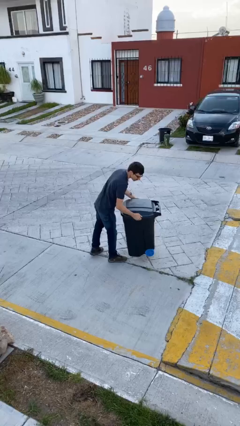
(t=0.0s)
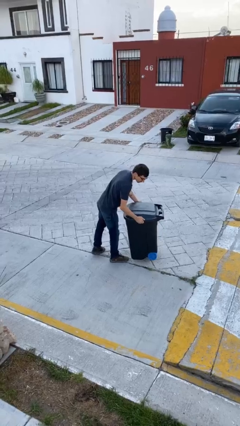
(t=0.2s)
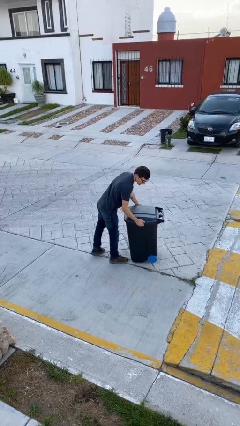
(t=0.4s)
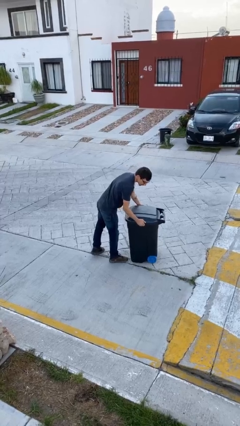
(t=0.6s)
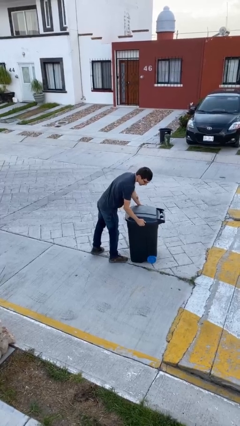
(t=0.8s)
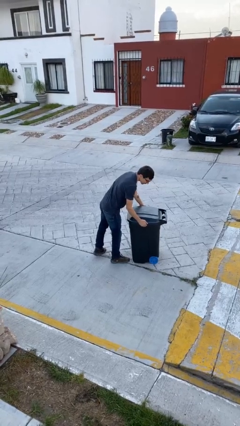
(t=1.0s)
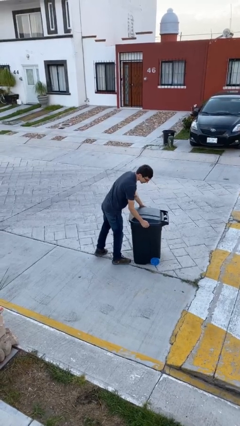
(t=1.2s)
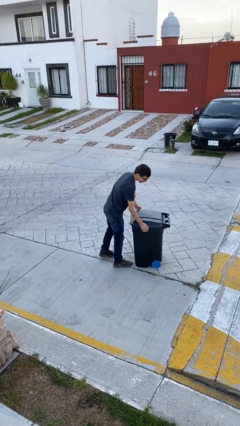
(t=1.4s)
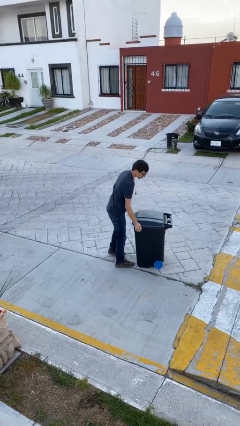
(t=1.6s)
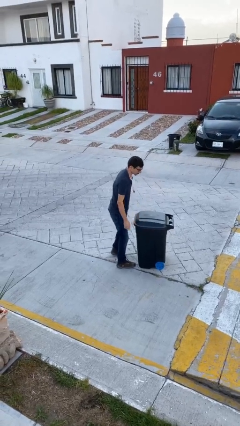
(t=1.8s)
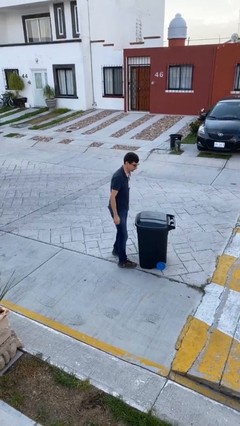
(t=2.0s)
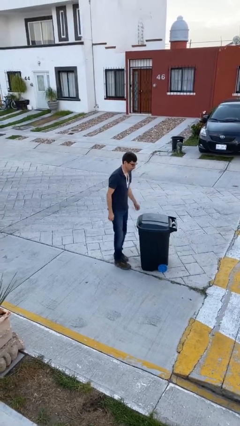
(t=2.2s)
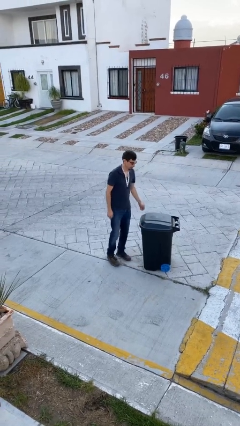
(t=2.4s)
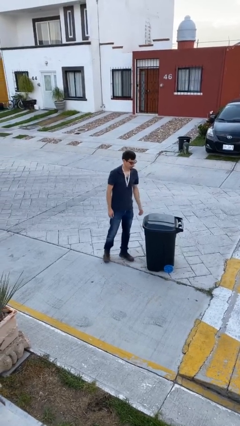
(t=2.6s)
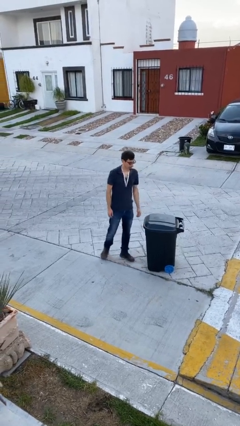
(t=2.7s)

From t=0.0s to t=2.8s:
person puts down object on floor

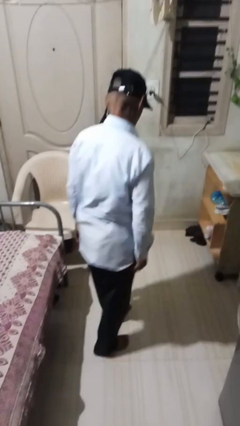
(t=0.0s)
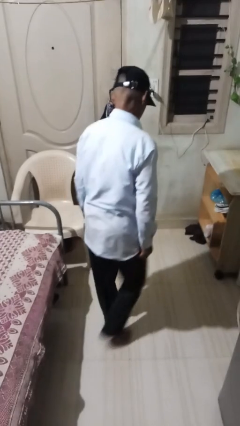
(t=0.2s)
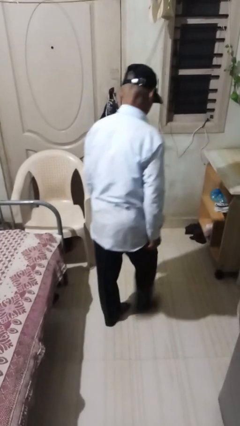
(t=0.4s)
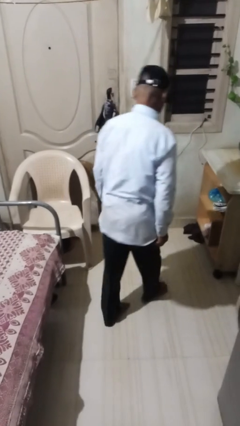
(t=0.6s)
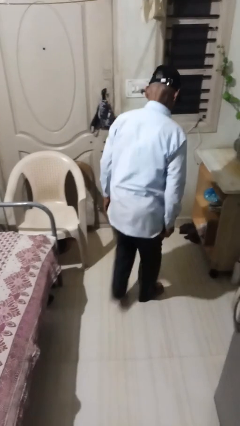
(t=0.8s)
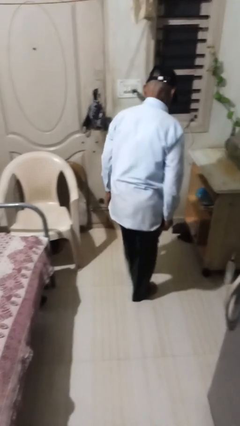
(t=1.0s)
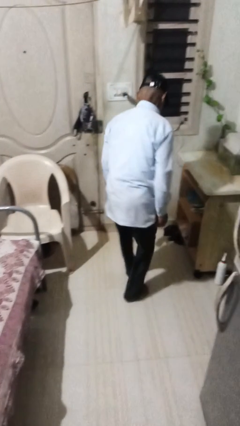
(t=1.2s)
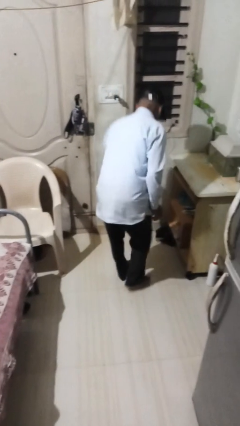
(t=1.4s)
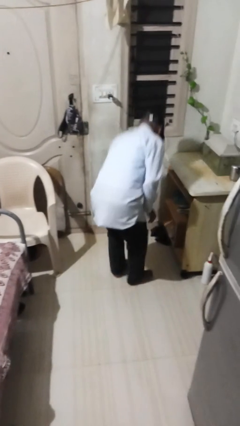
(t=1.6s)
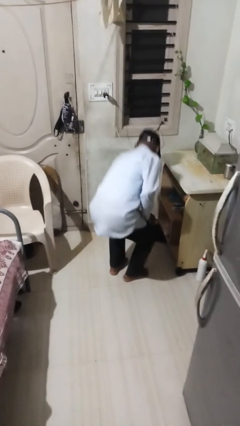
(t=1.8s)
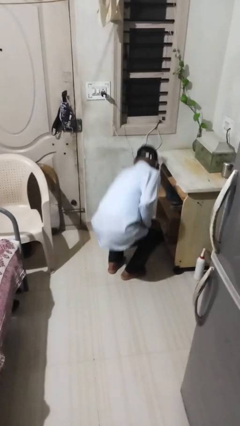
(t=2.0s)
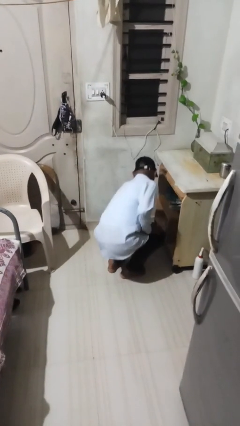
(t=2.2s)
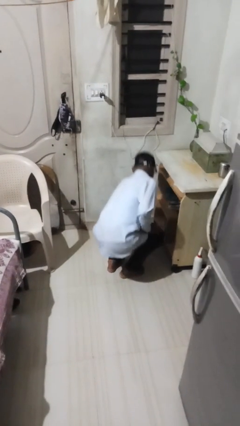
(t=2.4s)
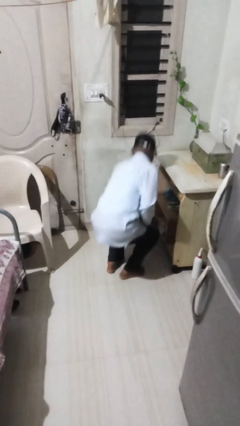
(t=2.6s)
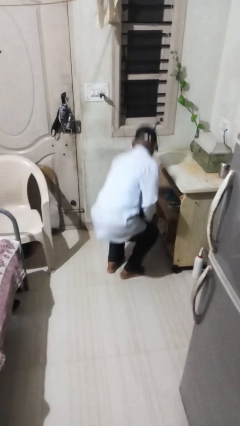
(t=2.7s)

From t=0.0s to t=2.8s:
person picks up object from floor

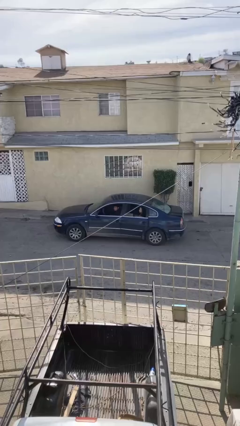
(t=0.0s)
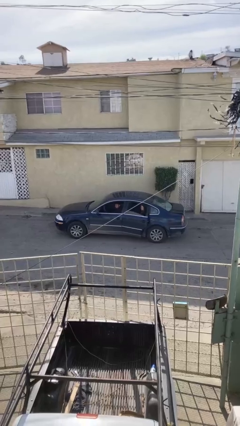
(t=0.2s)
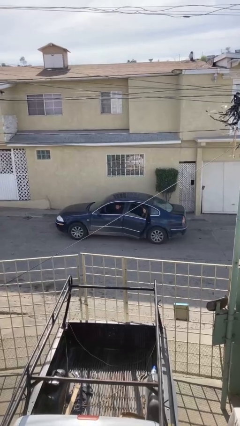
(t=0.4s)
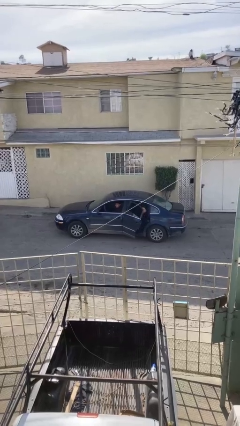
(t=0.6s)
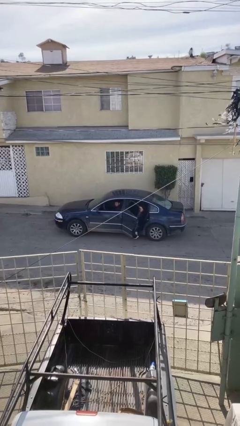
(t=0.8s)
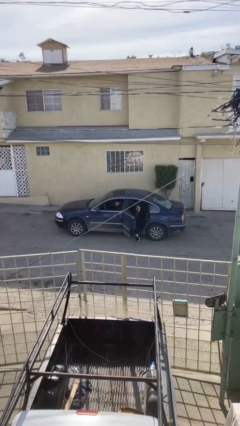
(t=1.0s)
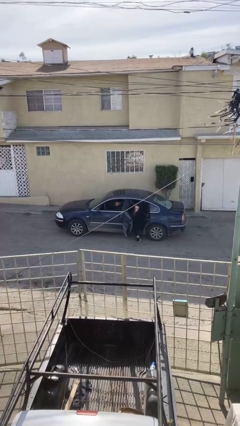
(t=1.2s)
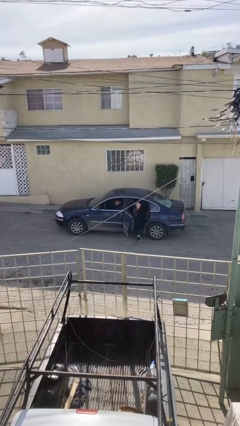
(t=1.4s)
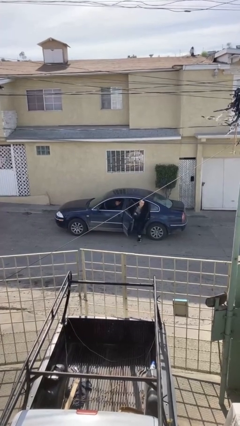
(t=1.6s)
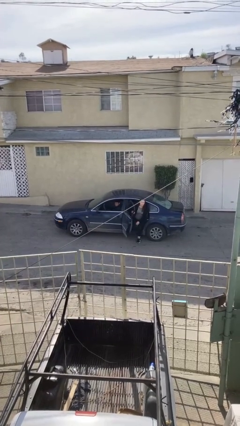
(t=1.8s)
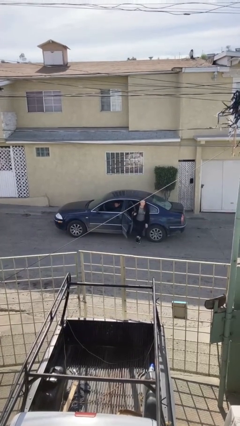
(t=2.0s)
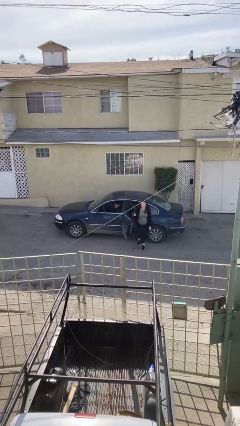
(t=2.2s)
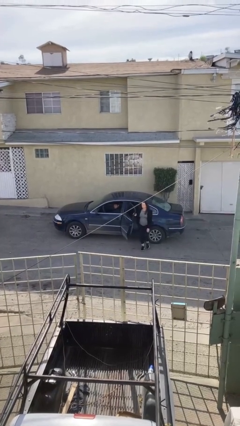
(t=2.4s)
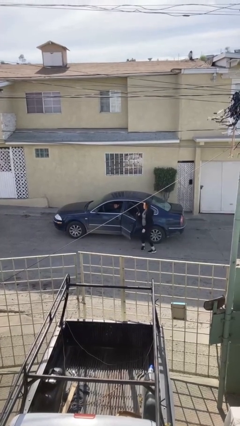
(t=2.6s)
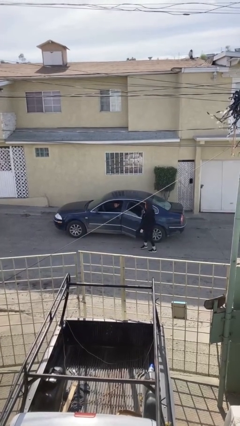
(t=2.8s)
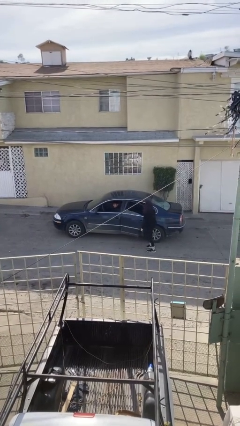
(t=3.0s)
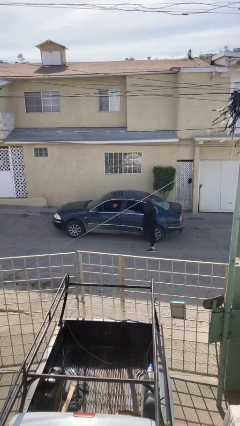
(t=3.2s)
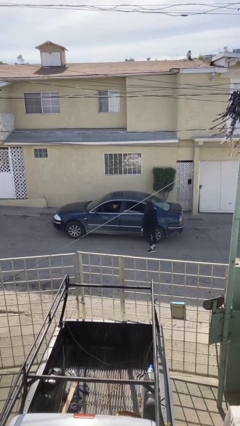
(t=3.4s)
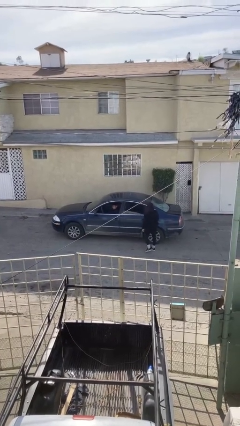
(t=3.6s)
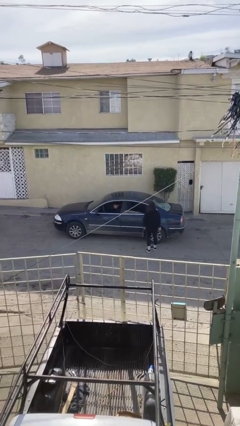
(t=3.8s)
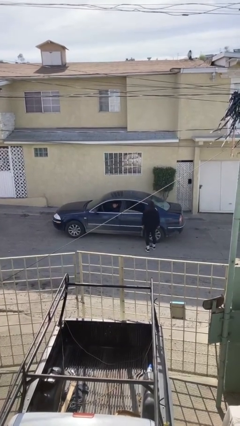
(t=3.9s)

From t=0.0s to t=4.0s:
car drops off person

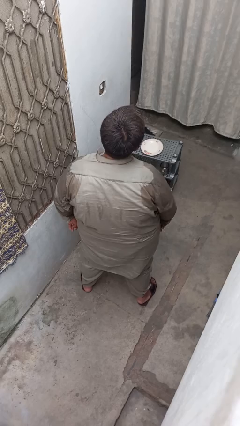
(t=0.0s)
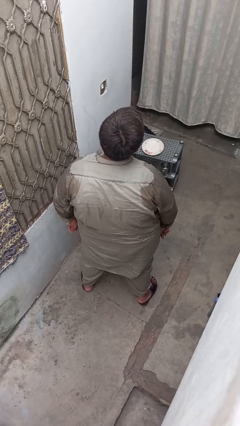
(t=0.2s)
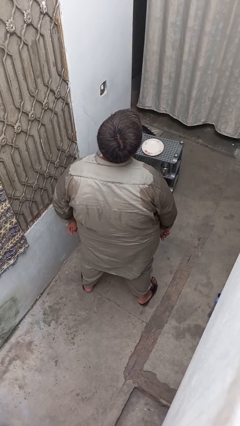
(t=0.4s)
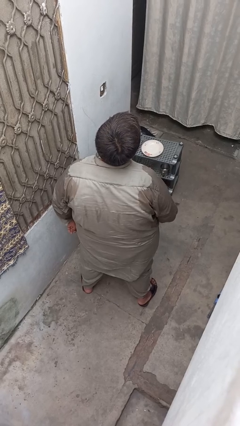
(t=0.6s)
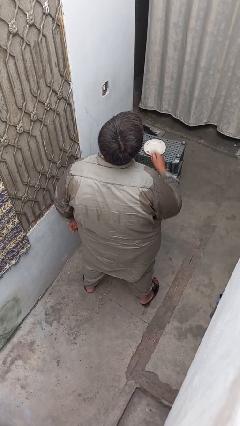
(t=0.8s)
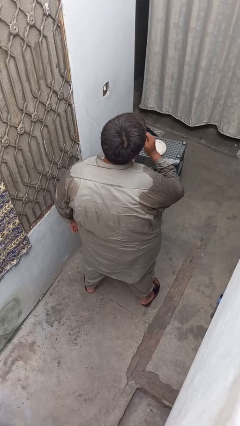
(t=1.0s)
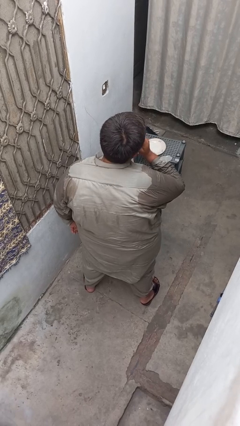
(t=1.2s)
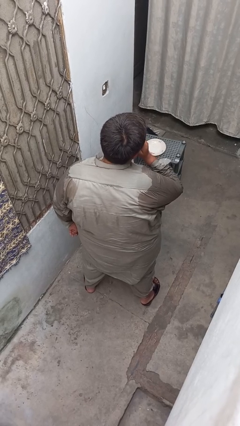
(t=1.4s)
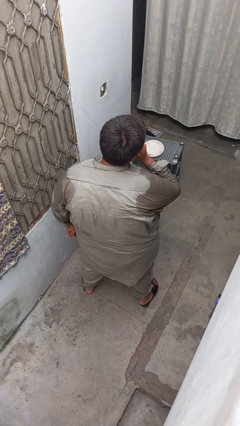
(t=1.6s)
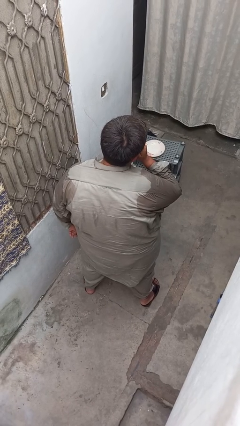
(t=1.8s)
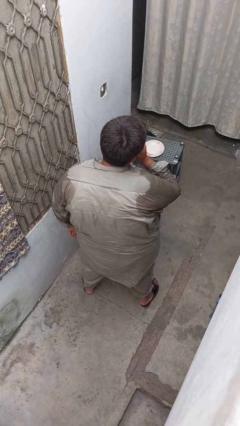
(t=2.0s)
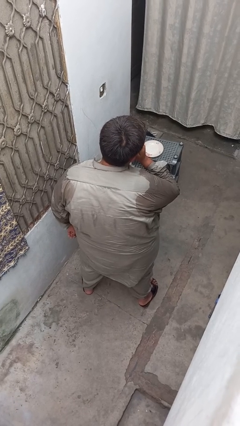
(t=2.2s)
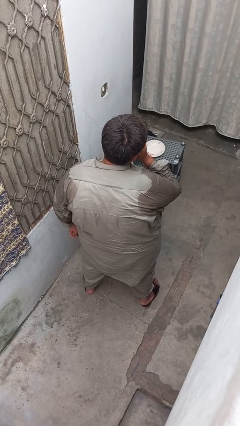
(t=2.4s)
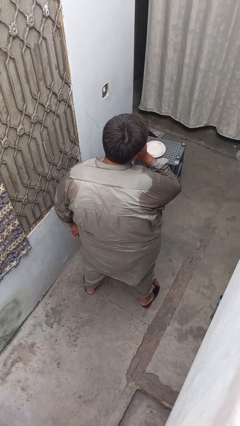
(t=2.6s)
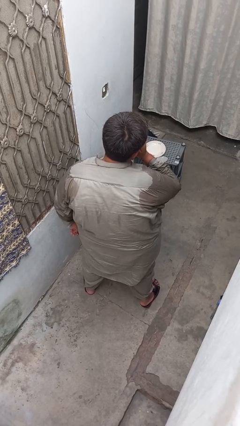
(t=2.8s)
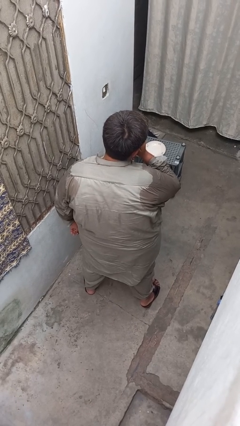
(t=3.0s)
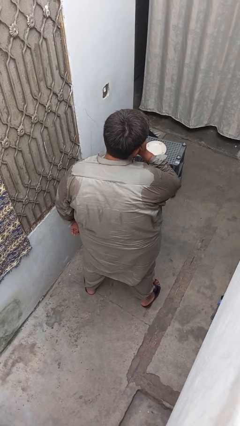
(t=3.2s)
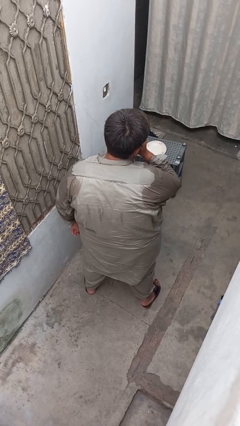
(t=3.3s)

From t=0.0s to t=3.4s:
person flosses

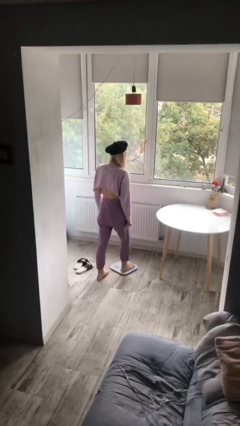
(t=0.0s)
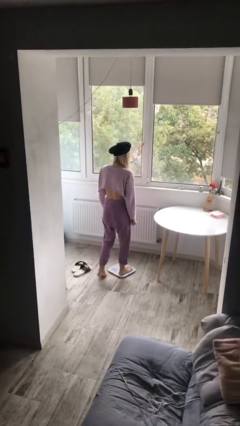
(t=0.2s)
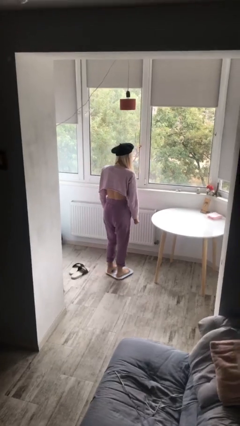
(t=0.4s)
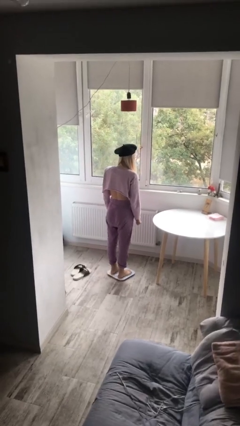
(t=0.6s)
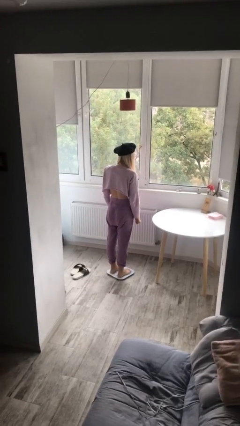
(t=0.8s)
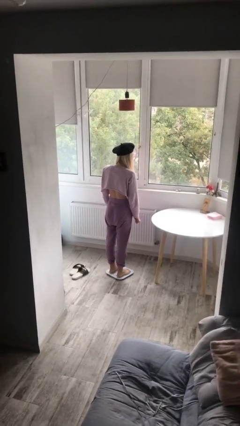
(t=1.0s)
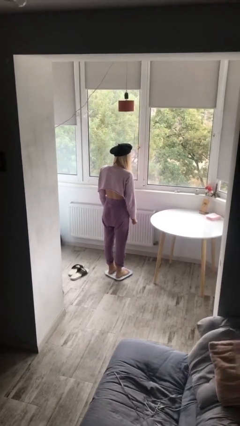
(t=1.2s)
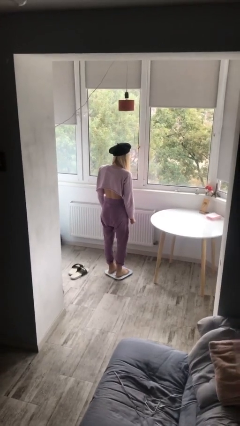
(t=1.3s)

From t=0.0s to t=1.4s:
person uses bodyweight scale

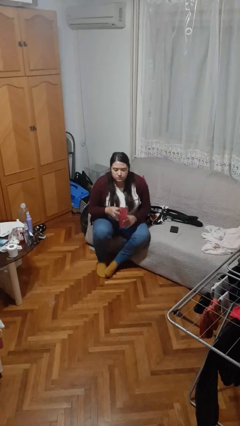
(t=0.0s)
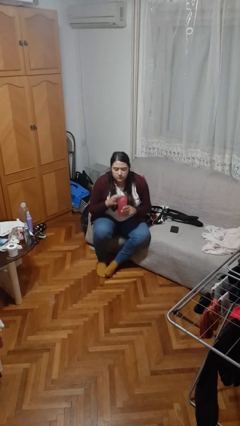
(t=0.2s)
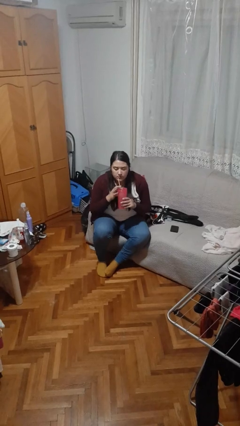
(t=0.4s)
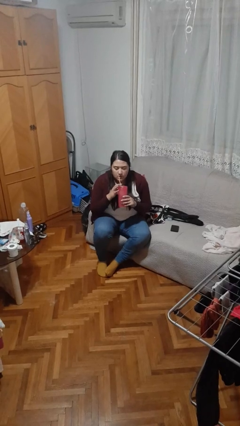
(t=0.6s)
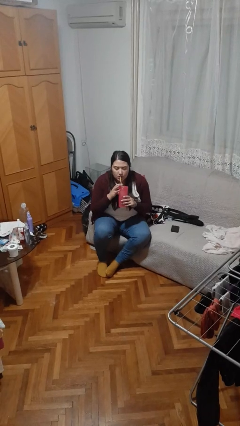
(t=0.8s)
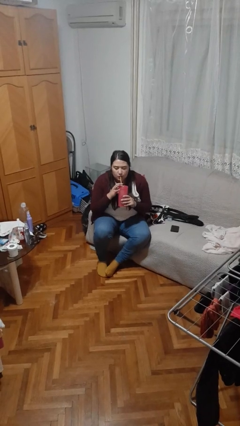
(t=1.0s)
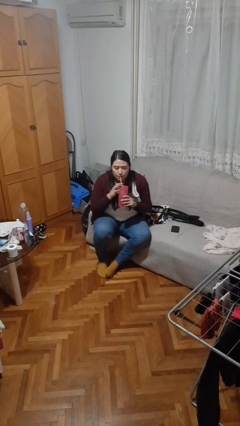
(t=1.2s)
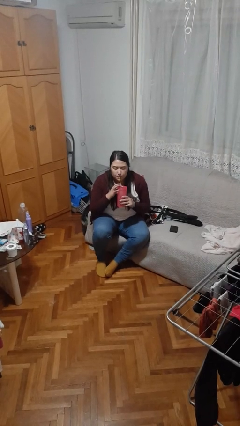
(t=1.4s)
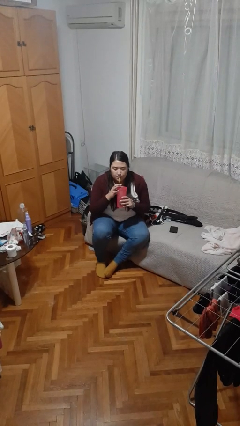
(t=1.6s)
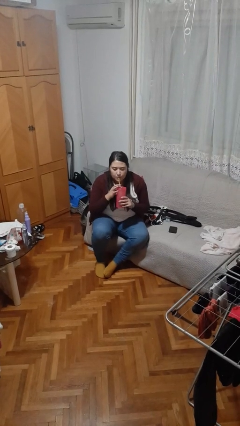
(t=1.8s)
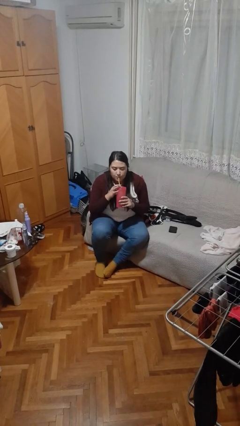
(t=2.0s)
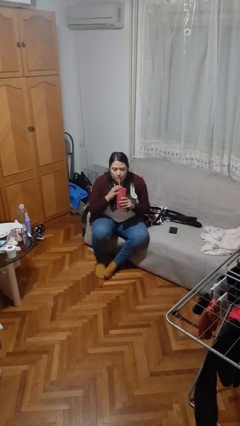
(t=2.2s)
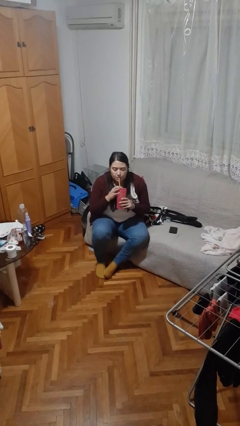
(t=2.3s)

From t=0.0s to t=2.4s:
person drinks from straw

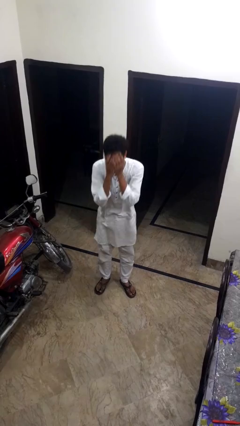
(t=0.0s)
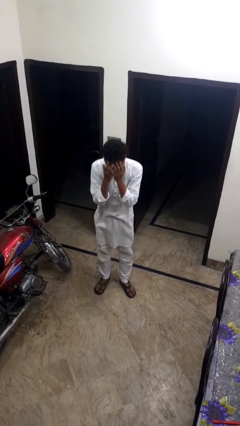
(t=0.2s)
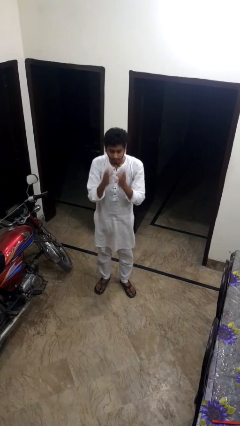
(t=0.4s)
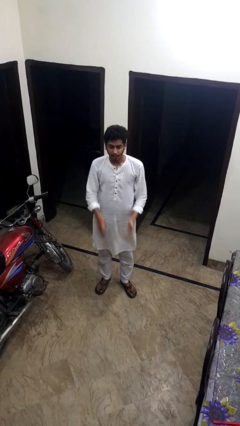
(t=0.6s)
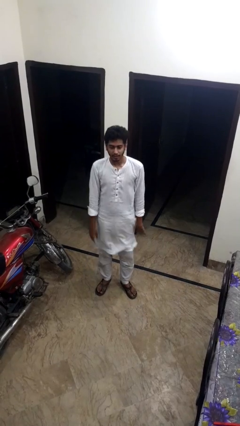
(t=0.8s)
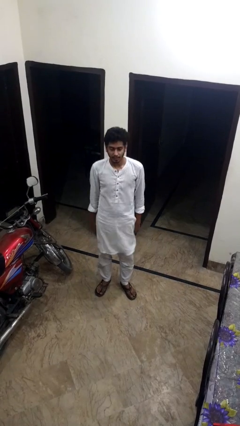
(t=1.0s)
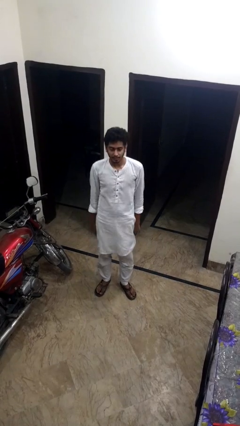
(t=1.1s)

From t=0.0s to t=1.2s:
person sneezes into hand
